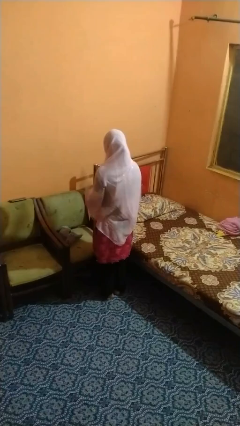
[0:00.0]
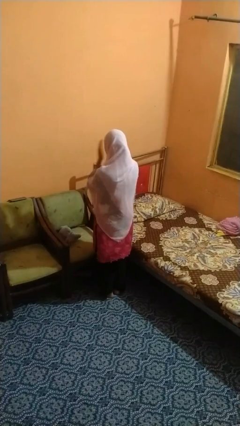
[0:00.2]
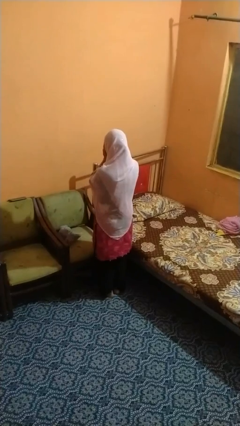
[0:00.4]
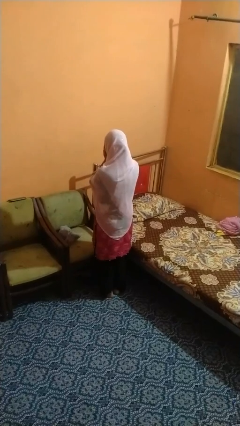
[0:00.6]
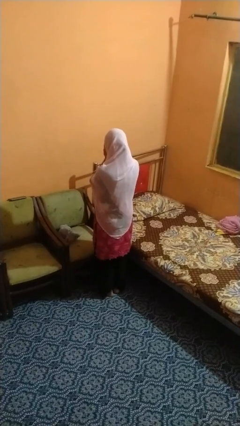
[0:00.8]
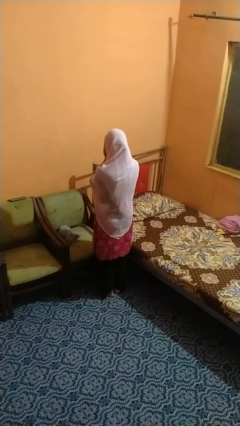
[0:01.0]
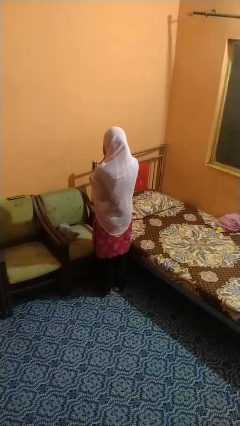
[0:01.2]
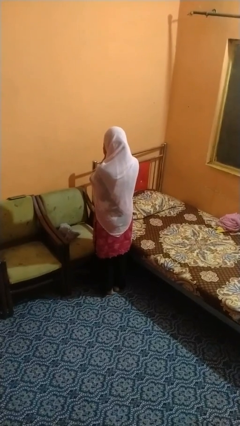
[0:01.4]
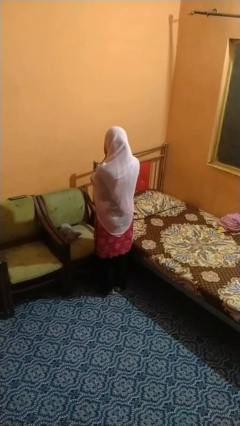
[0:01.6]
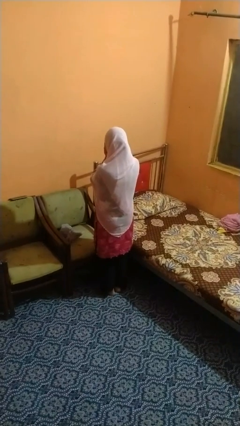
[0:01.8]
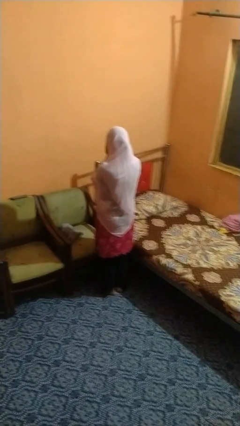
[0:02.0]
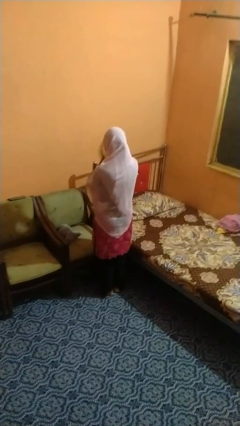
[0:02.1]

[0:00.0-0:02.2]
person covers face with hands

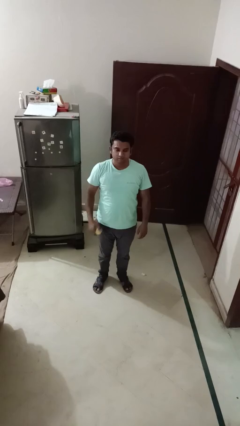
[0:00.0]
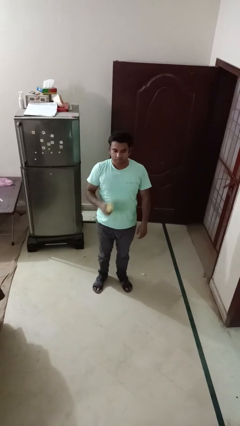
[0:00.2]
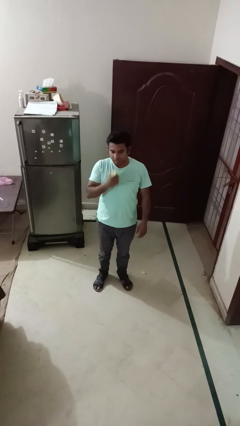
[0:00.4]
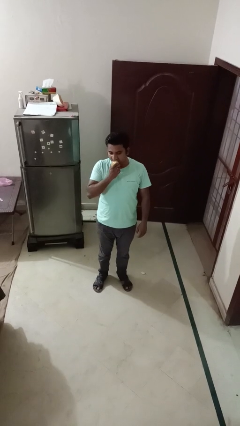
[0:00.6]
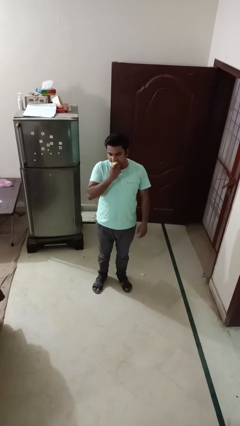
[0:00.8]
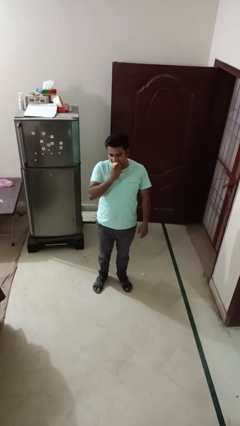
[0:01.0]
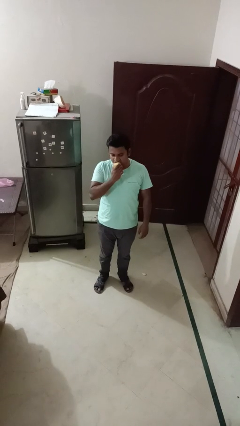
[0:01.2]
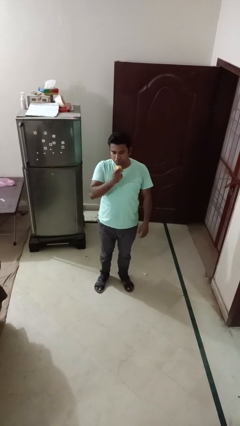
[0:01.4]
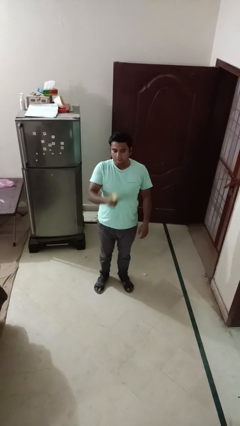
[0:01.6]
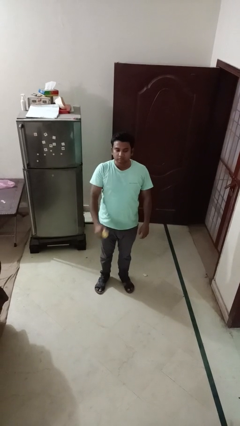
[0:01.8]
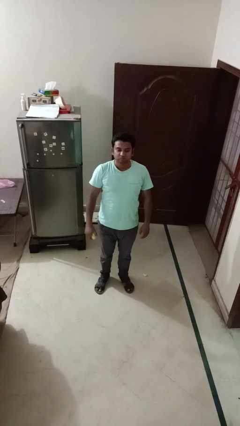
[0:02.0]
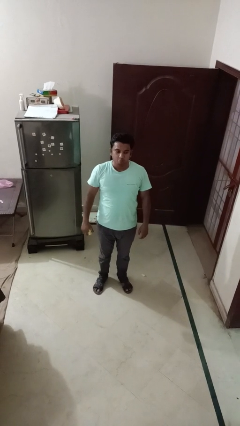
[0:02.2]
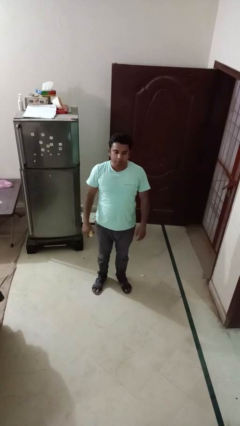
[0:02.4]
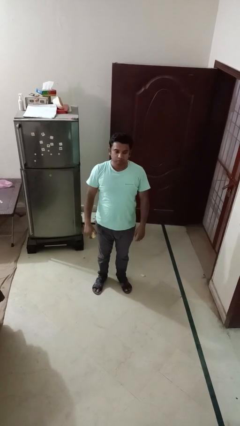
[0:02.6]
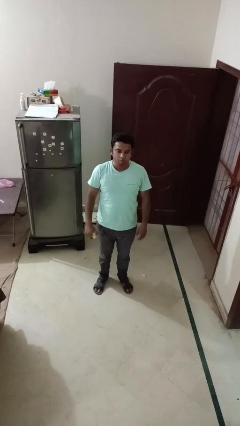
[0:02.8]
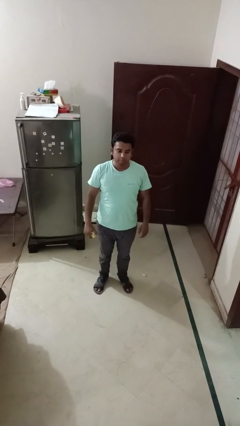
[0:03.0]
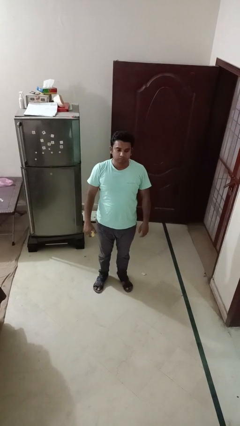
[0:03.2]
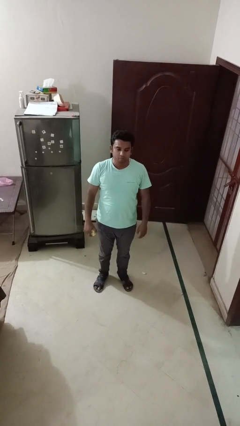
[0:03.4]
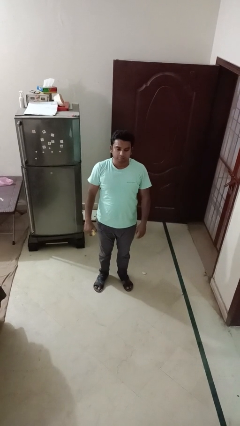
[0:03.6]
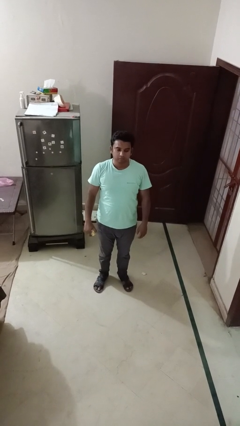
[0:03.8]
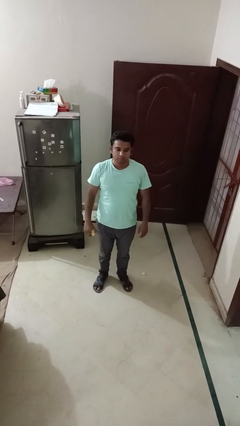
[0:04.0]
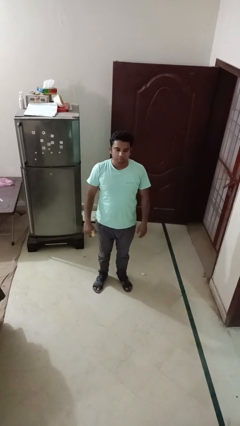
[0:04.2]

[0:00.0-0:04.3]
person eats apple

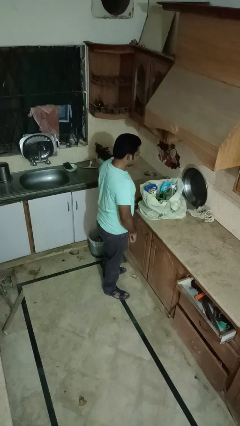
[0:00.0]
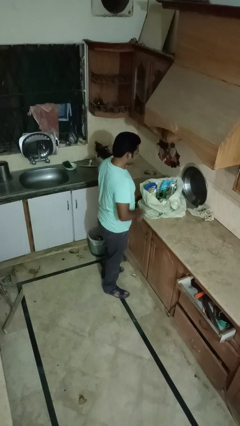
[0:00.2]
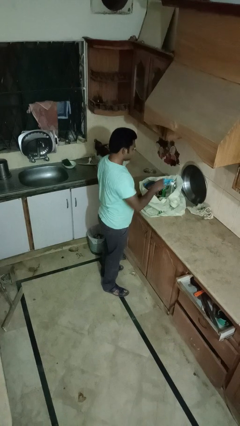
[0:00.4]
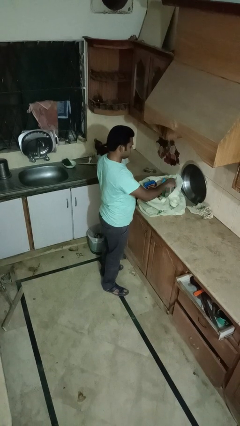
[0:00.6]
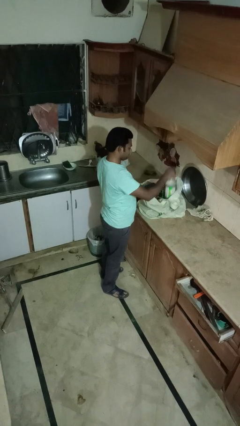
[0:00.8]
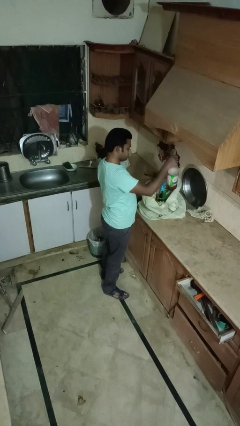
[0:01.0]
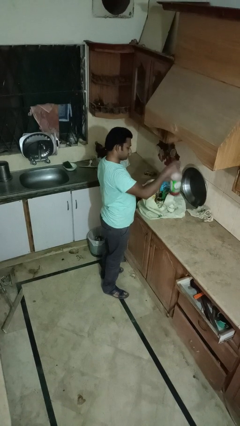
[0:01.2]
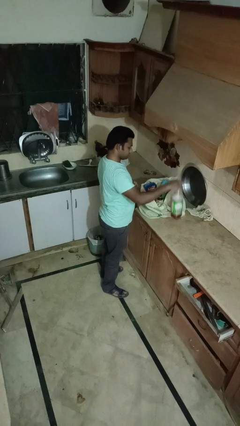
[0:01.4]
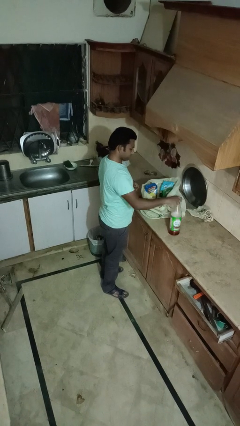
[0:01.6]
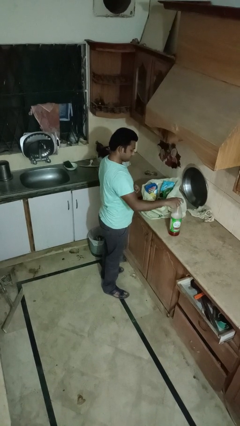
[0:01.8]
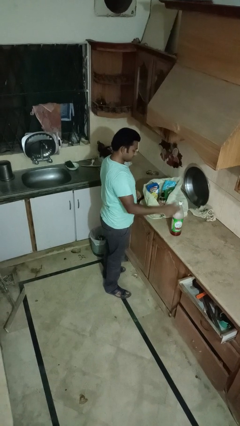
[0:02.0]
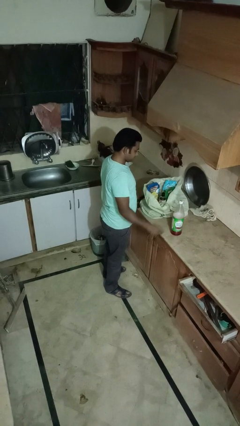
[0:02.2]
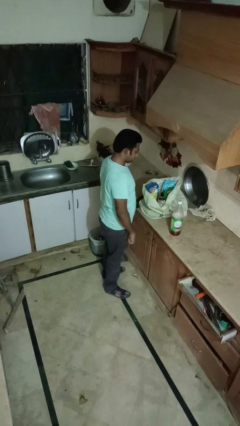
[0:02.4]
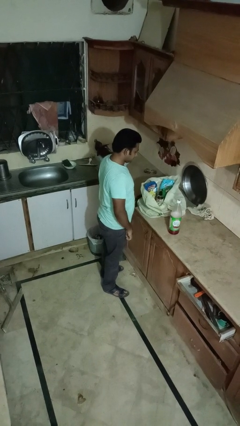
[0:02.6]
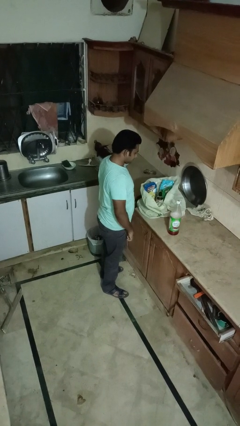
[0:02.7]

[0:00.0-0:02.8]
person takes object from bag

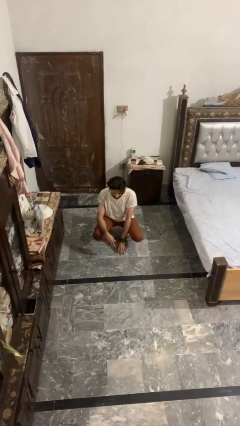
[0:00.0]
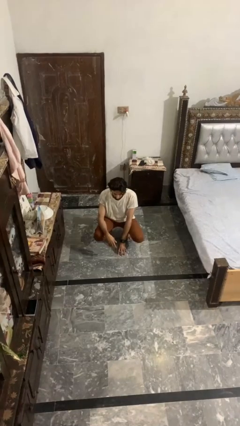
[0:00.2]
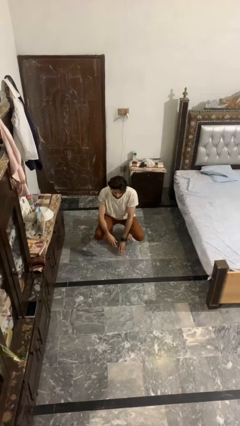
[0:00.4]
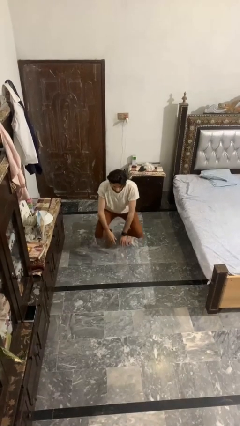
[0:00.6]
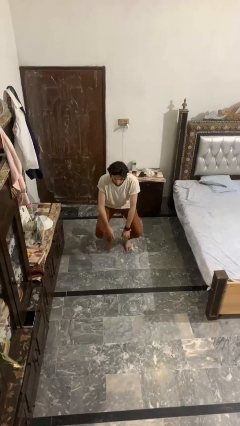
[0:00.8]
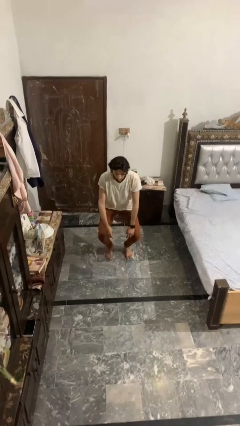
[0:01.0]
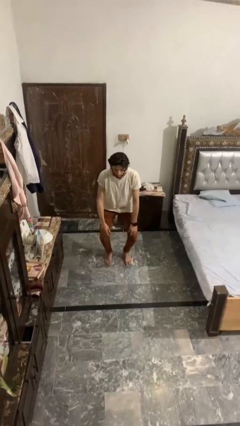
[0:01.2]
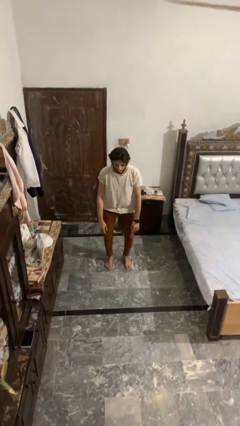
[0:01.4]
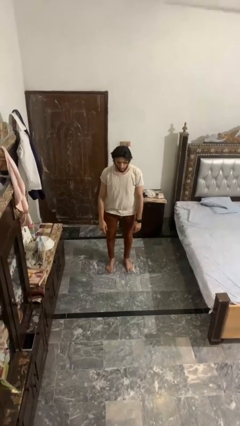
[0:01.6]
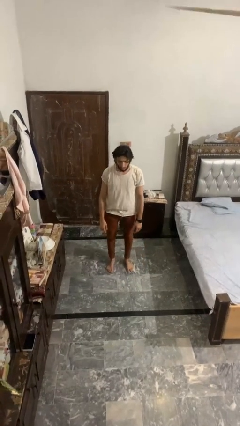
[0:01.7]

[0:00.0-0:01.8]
person stands up

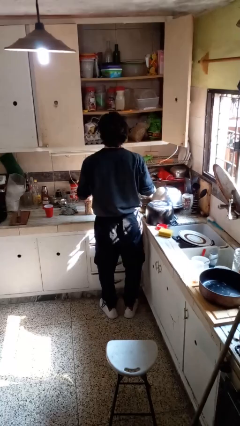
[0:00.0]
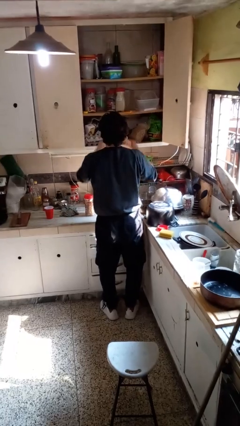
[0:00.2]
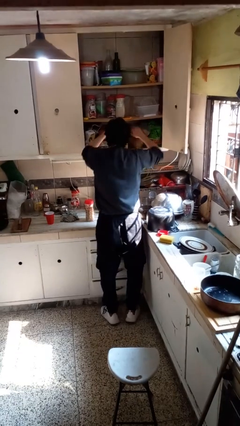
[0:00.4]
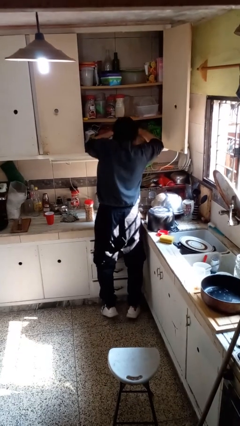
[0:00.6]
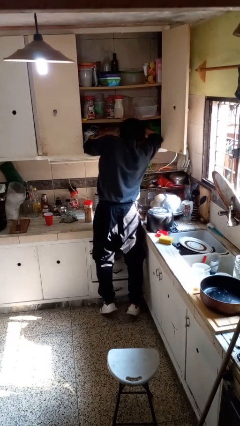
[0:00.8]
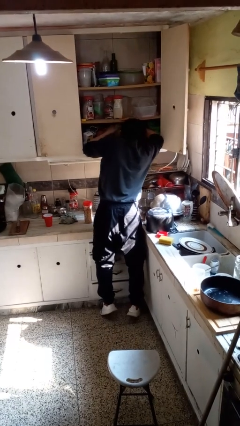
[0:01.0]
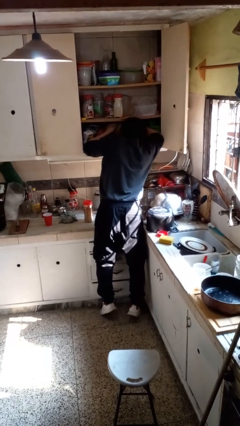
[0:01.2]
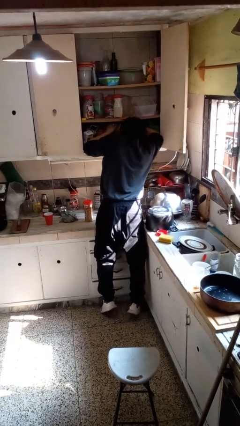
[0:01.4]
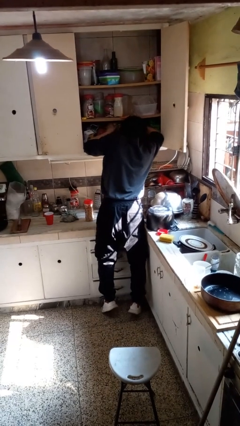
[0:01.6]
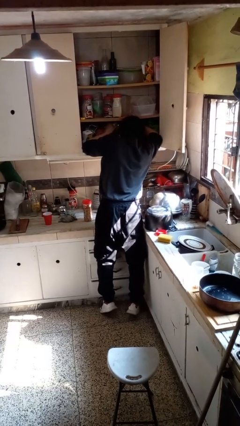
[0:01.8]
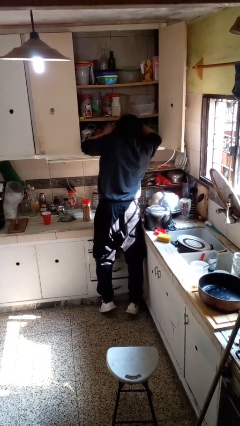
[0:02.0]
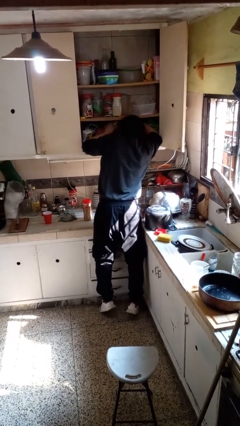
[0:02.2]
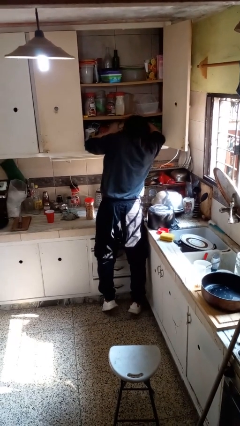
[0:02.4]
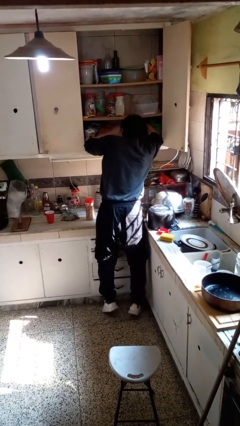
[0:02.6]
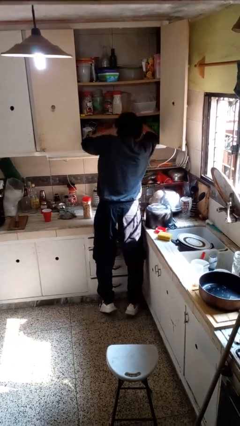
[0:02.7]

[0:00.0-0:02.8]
person searches in cabinet

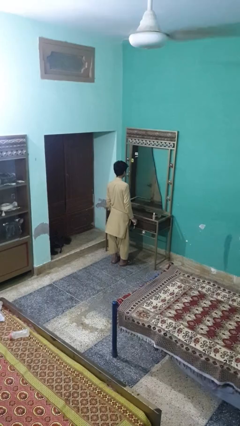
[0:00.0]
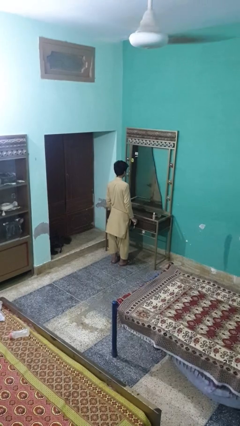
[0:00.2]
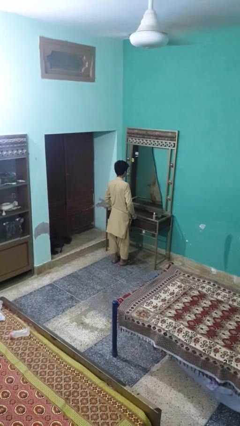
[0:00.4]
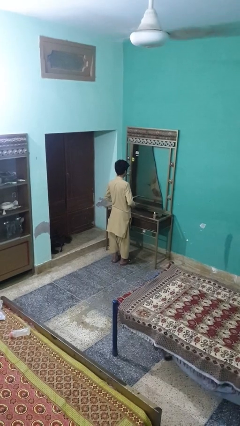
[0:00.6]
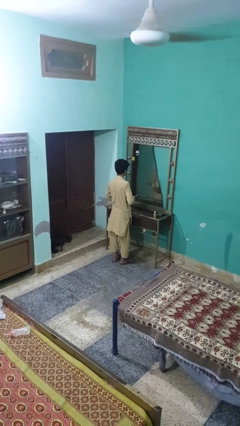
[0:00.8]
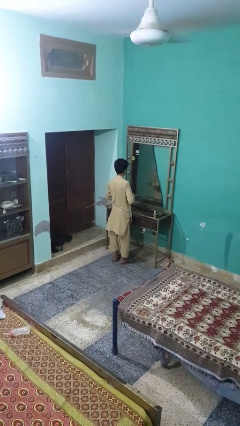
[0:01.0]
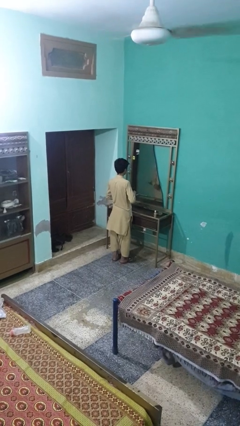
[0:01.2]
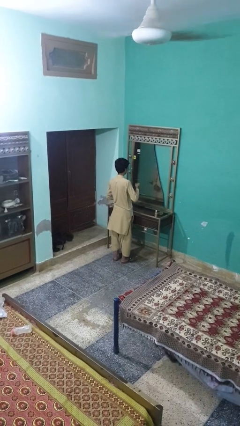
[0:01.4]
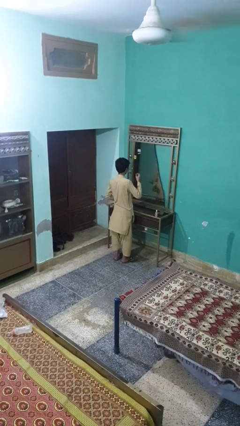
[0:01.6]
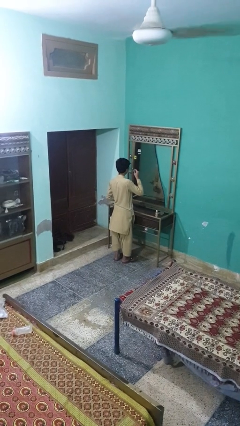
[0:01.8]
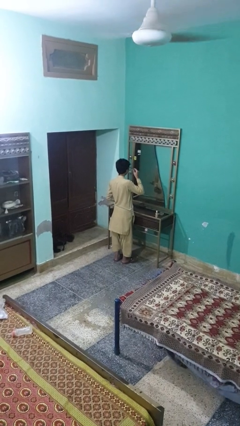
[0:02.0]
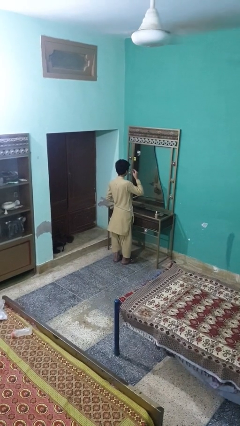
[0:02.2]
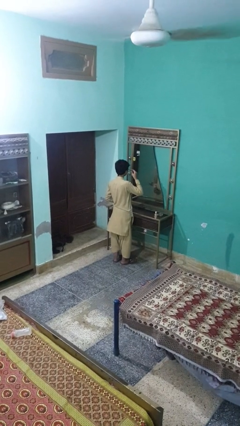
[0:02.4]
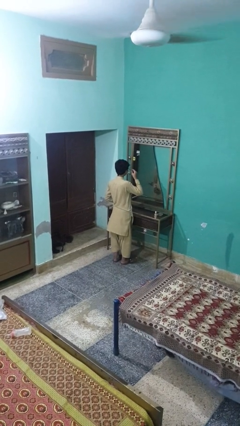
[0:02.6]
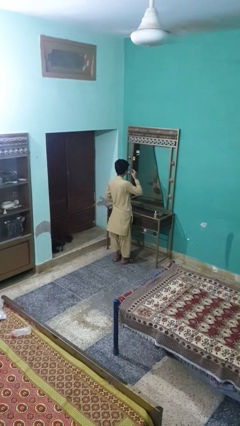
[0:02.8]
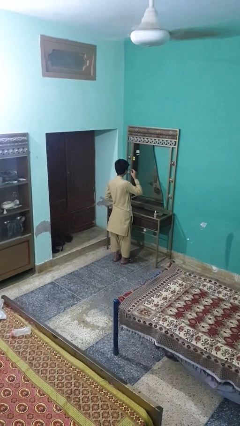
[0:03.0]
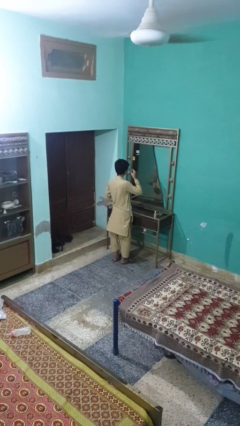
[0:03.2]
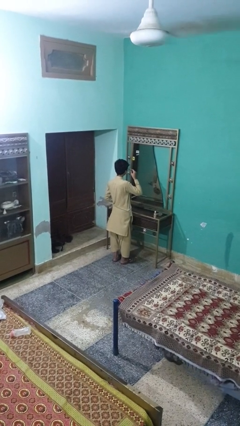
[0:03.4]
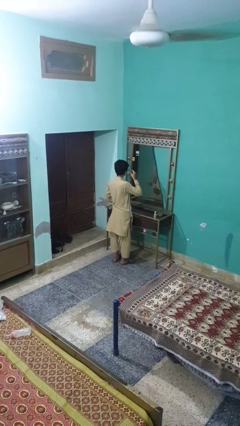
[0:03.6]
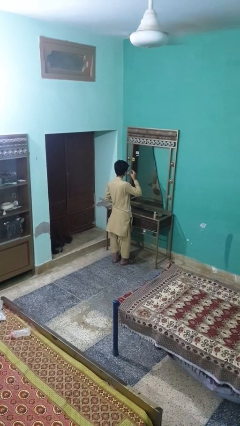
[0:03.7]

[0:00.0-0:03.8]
person applies eye makeup
